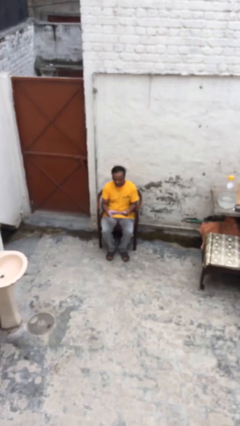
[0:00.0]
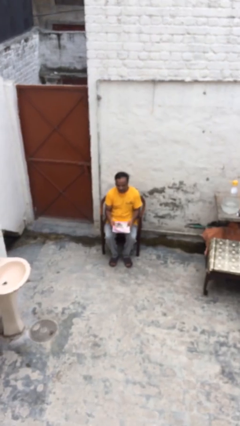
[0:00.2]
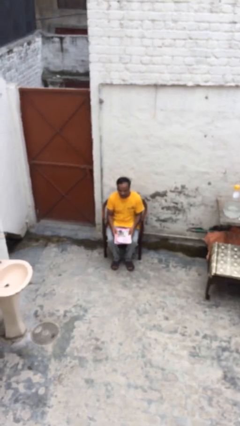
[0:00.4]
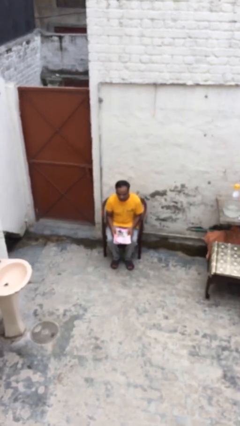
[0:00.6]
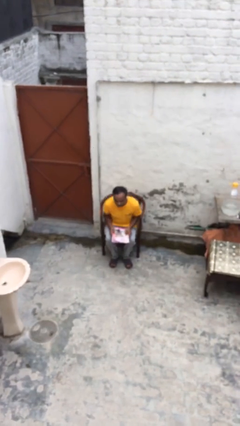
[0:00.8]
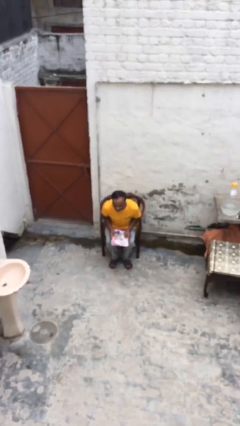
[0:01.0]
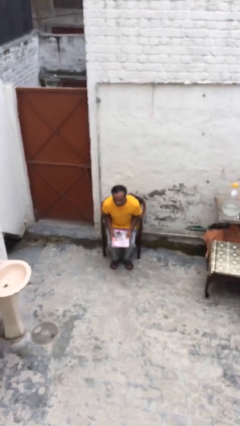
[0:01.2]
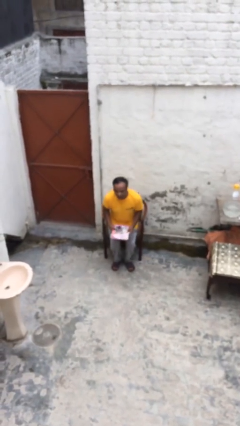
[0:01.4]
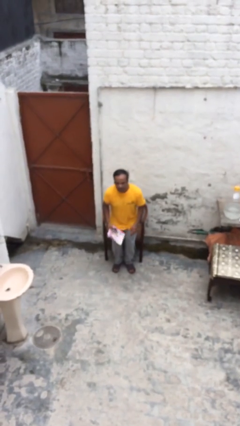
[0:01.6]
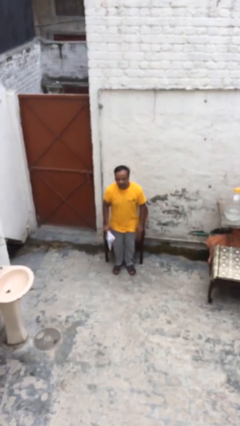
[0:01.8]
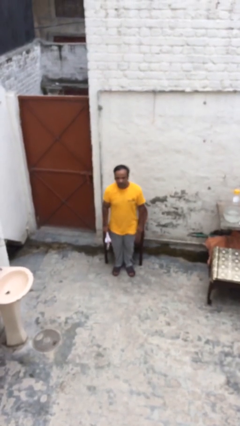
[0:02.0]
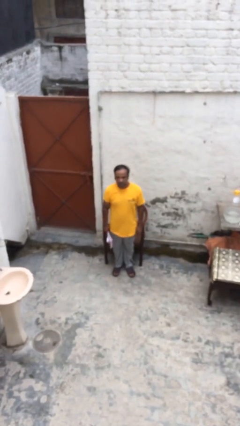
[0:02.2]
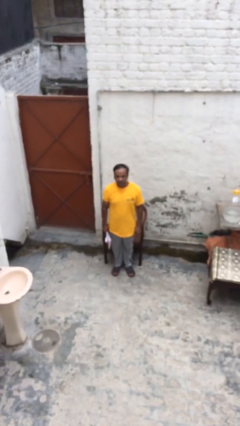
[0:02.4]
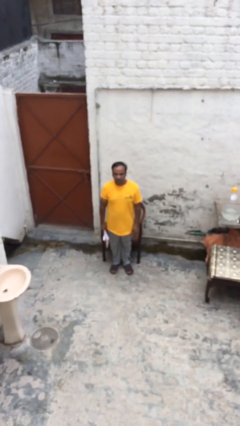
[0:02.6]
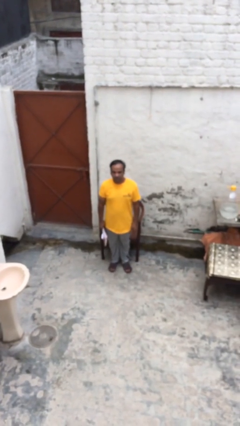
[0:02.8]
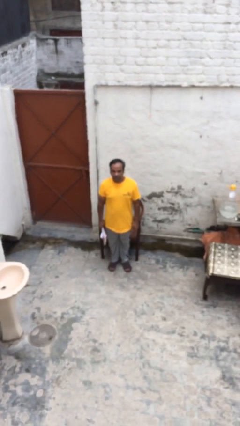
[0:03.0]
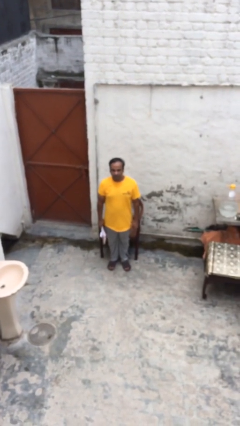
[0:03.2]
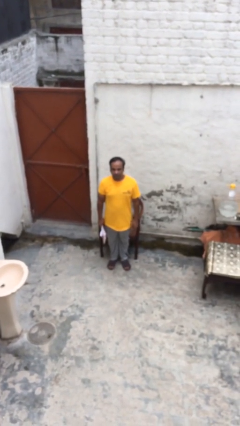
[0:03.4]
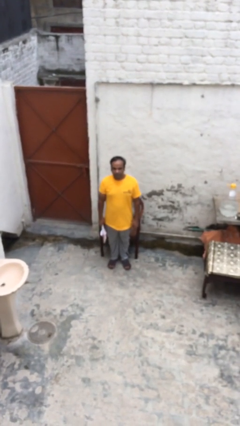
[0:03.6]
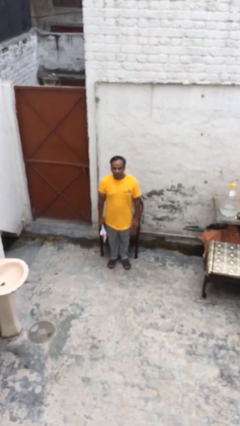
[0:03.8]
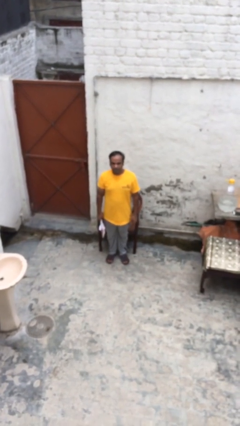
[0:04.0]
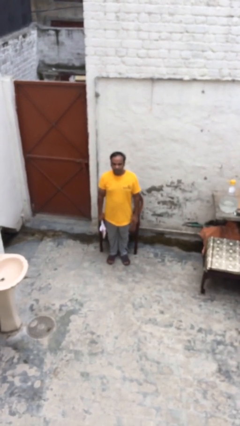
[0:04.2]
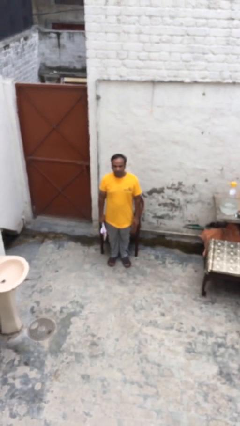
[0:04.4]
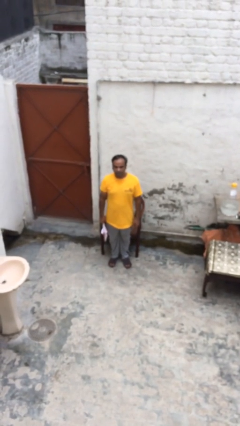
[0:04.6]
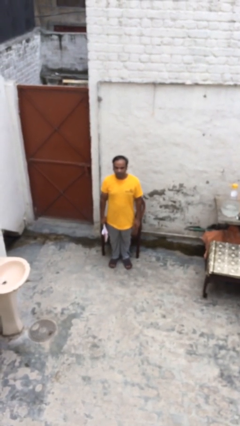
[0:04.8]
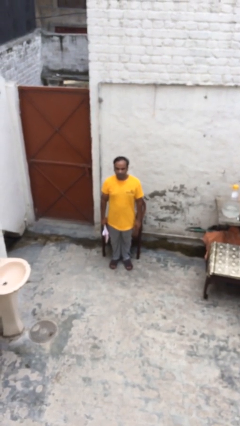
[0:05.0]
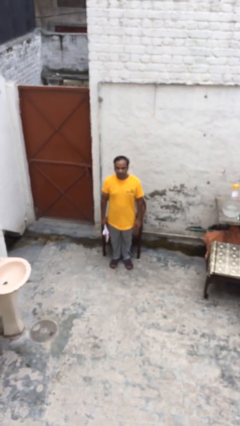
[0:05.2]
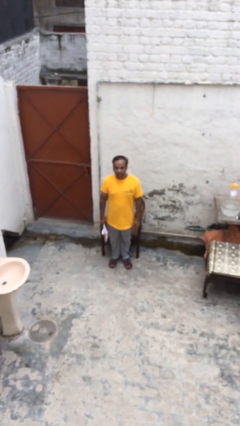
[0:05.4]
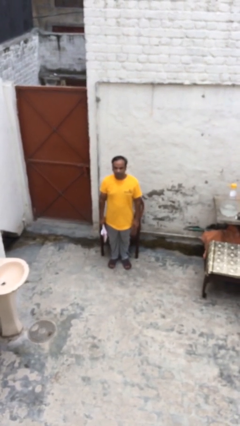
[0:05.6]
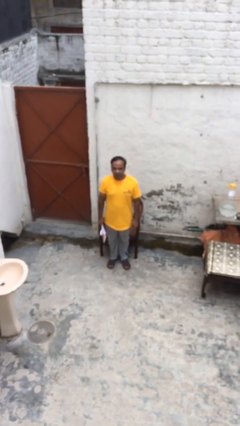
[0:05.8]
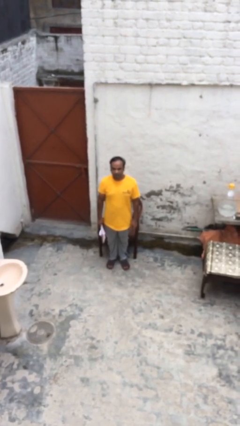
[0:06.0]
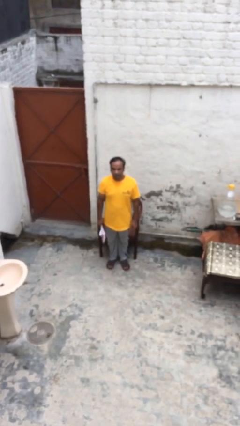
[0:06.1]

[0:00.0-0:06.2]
person stands up

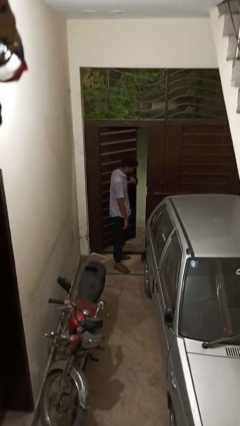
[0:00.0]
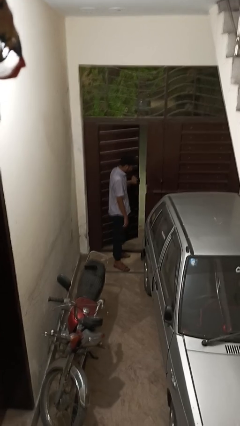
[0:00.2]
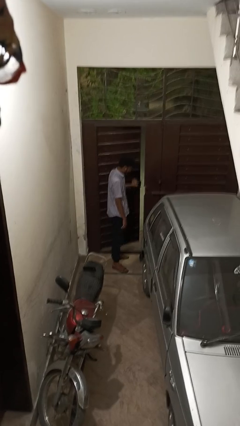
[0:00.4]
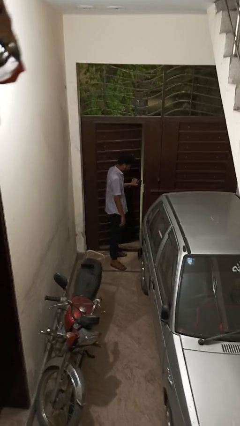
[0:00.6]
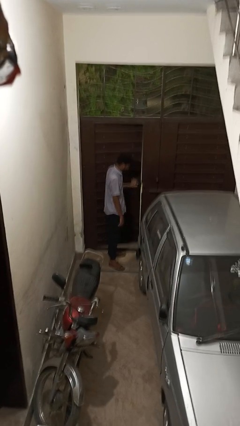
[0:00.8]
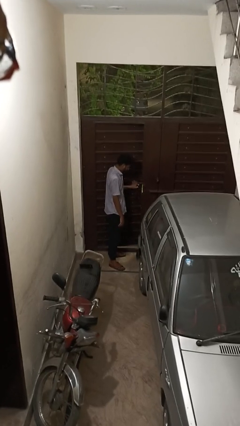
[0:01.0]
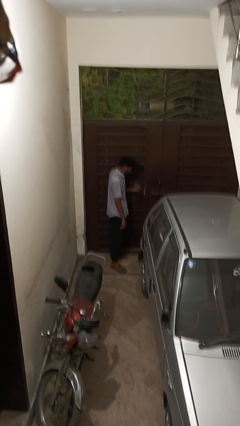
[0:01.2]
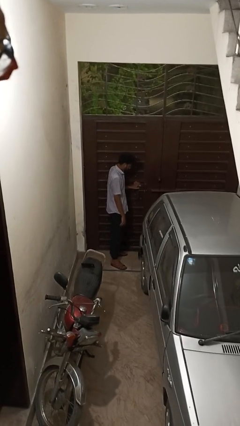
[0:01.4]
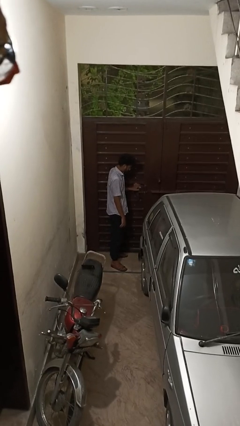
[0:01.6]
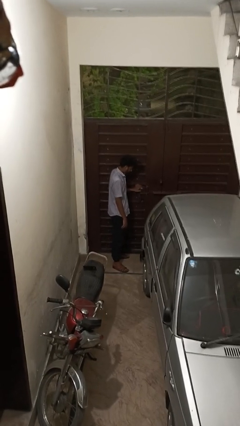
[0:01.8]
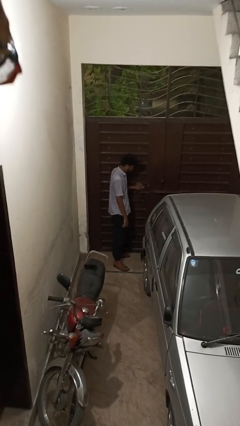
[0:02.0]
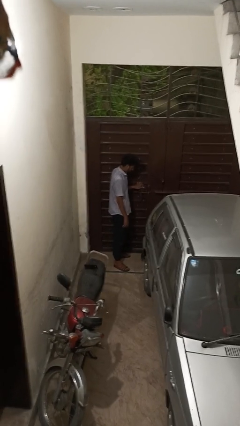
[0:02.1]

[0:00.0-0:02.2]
person closes gate

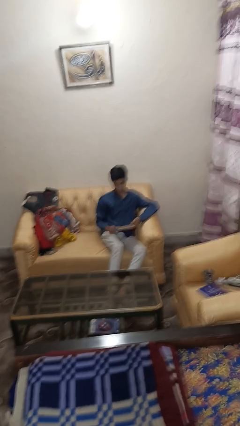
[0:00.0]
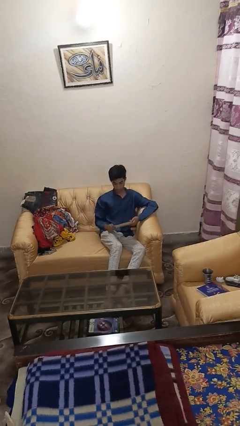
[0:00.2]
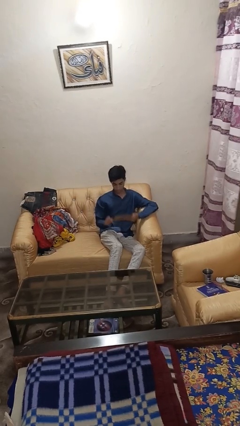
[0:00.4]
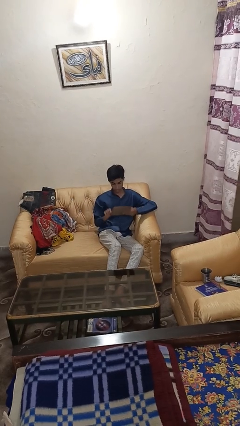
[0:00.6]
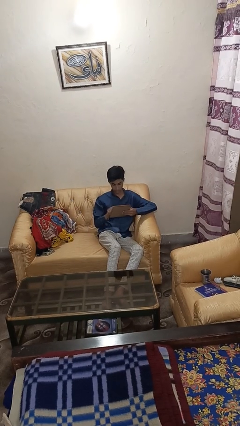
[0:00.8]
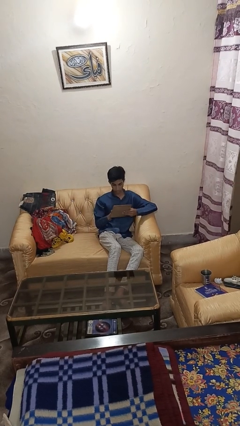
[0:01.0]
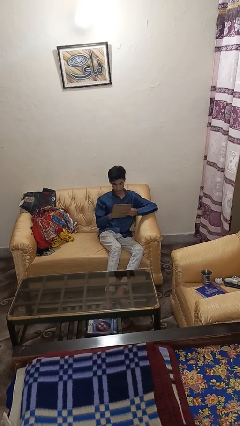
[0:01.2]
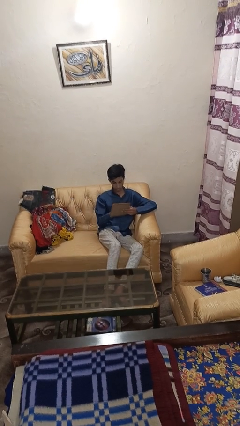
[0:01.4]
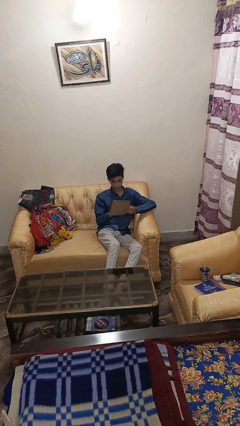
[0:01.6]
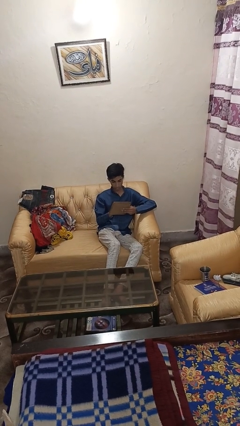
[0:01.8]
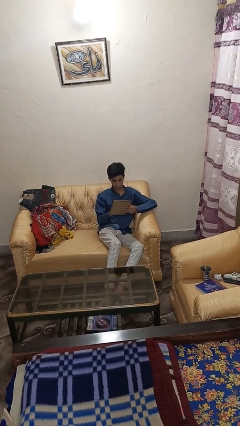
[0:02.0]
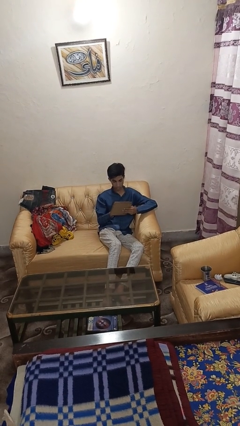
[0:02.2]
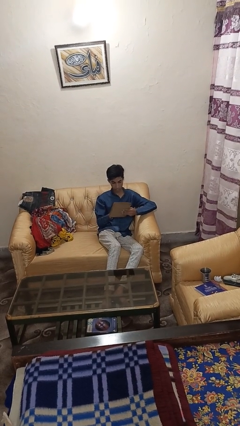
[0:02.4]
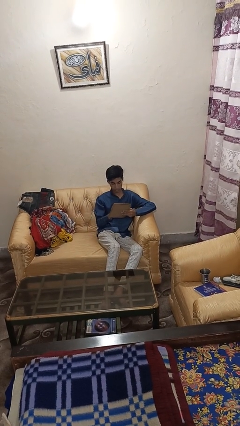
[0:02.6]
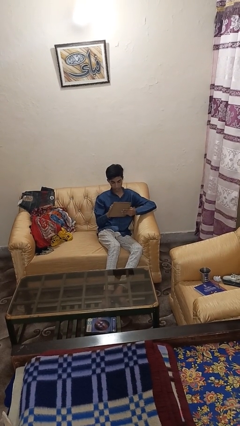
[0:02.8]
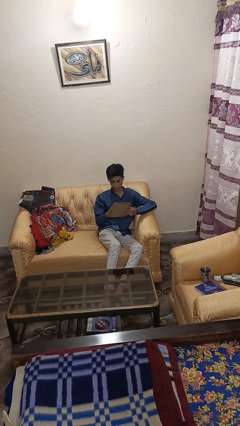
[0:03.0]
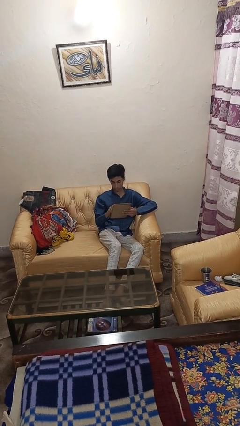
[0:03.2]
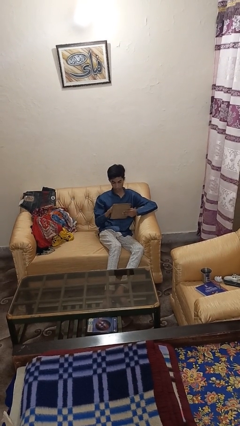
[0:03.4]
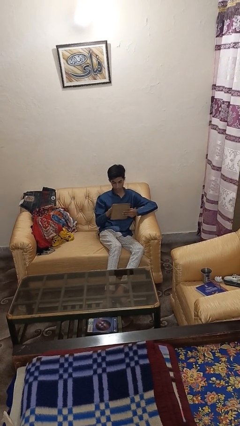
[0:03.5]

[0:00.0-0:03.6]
person interacts with tablet

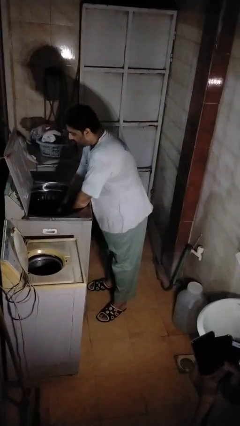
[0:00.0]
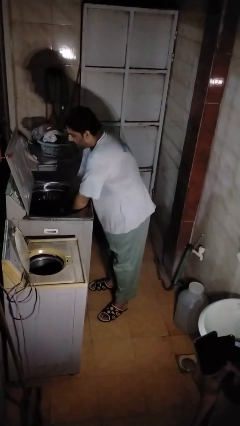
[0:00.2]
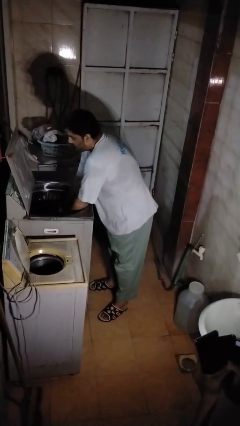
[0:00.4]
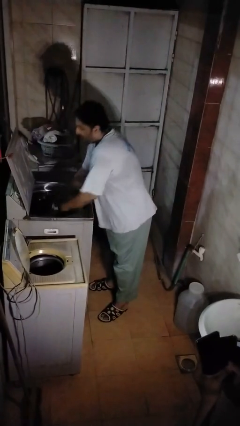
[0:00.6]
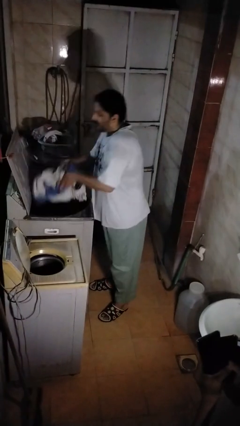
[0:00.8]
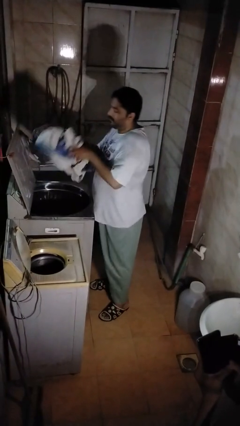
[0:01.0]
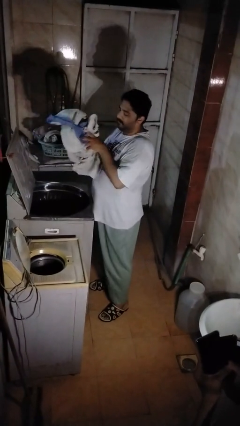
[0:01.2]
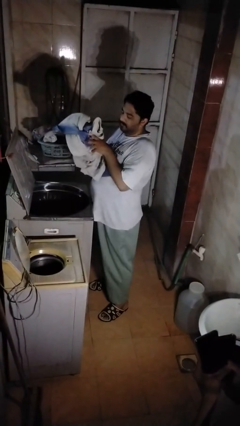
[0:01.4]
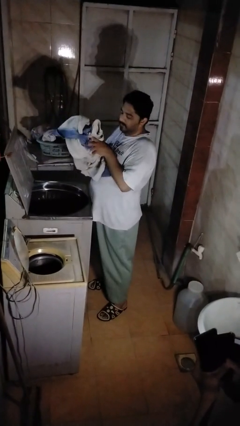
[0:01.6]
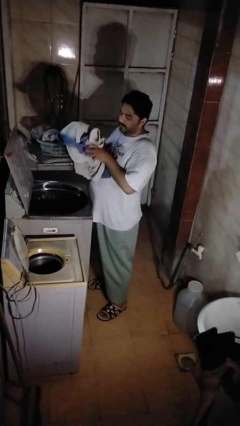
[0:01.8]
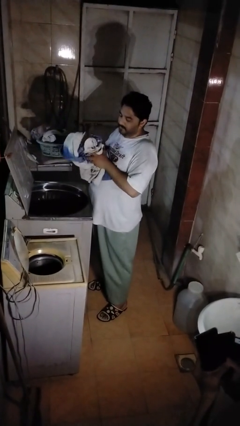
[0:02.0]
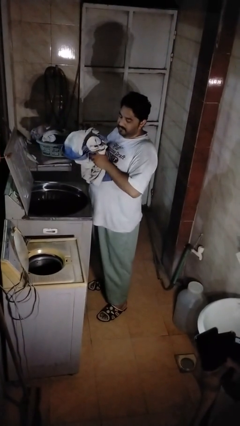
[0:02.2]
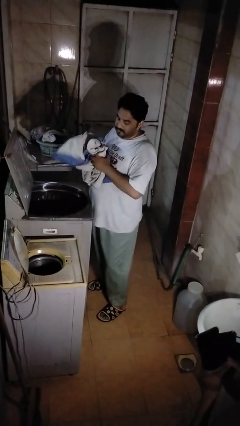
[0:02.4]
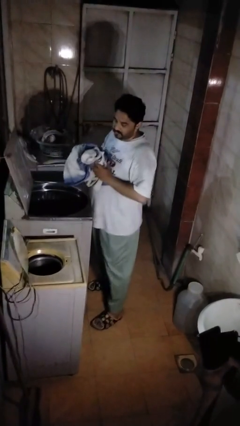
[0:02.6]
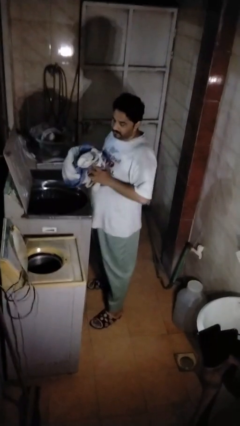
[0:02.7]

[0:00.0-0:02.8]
person unloads clotheswasher

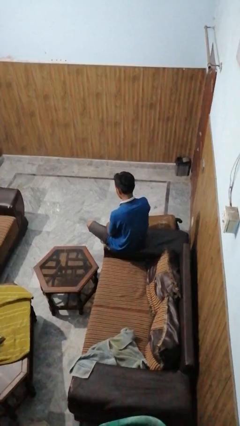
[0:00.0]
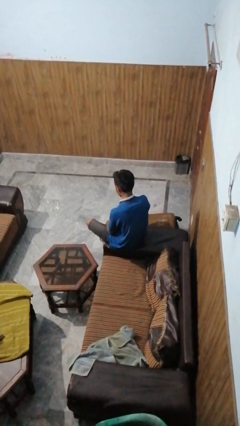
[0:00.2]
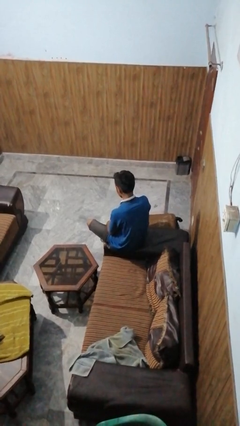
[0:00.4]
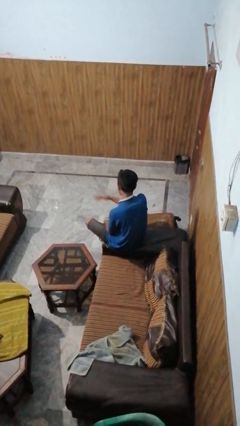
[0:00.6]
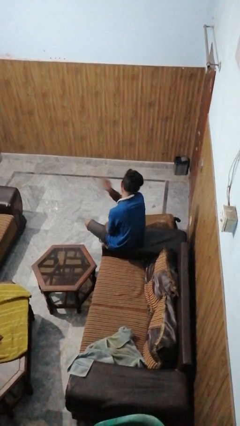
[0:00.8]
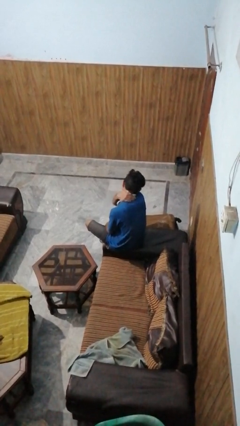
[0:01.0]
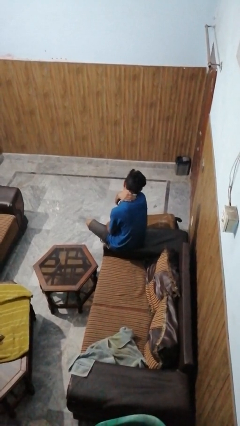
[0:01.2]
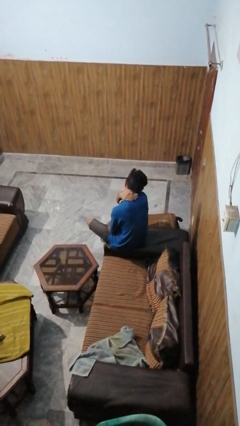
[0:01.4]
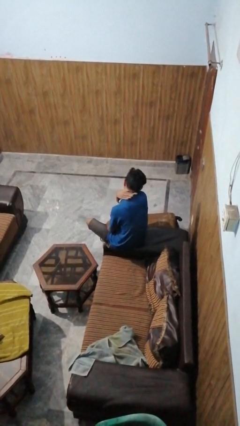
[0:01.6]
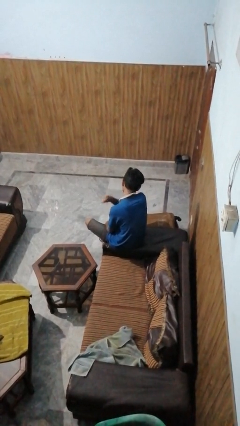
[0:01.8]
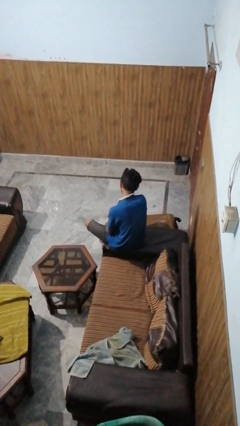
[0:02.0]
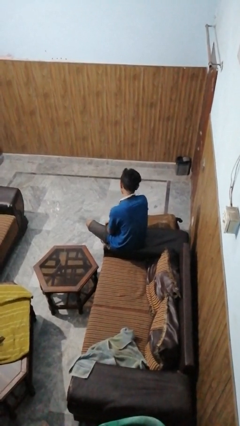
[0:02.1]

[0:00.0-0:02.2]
person swats bug
